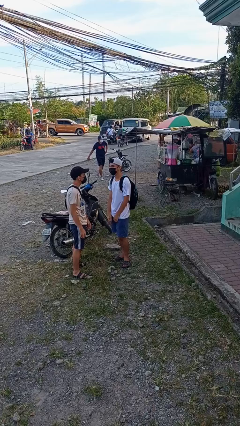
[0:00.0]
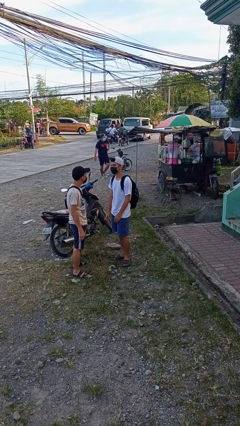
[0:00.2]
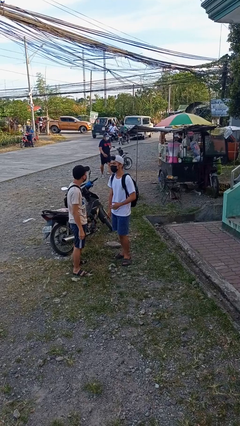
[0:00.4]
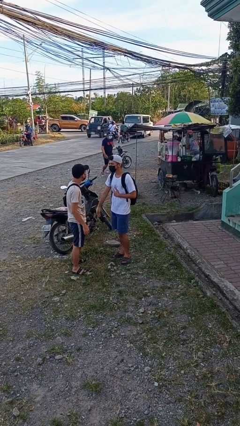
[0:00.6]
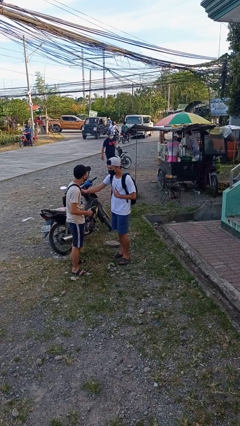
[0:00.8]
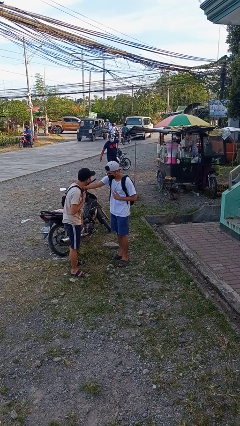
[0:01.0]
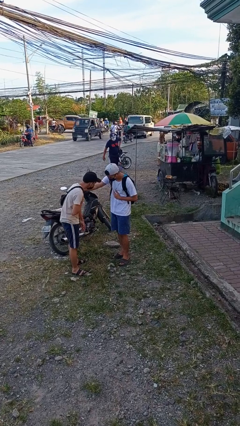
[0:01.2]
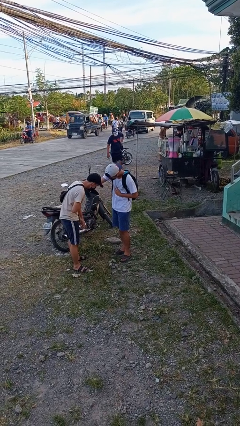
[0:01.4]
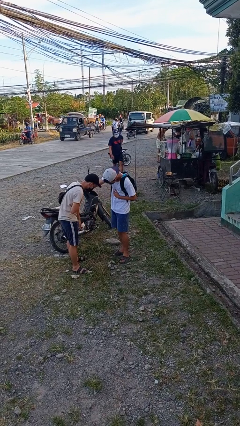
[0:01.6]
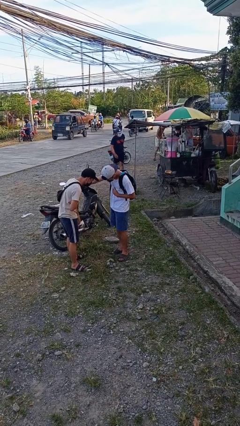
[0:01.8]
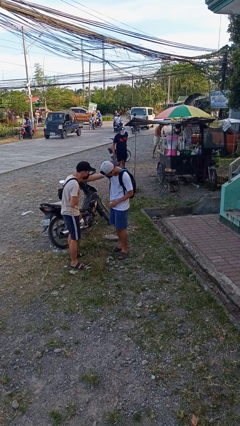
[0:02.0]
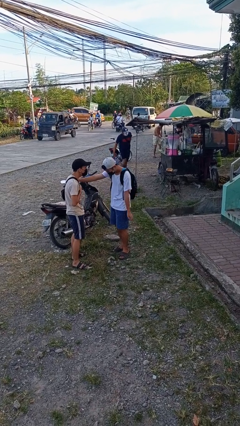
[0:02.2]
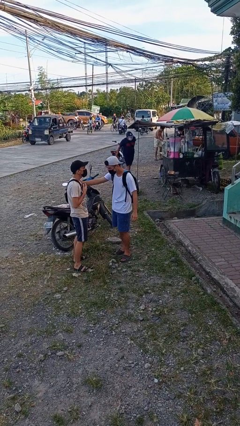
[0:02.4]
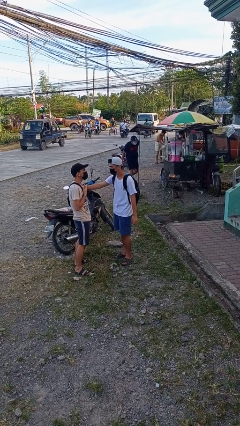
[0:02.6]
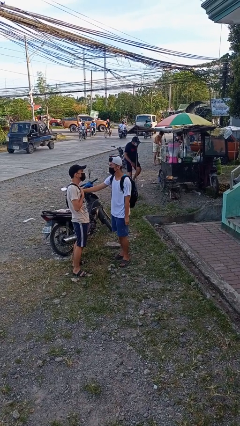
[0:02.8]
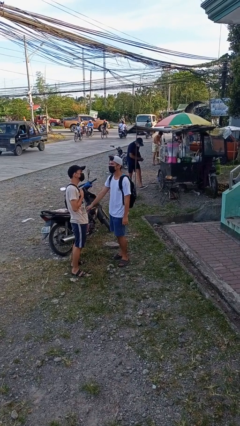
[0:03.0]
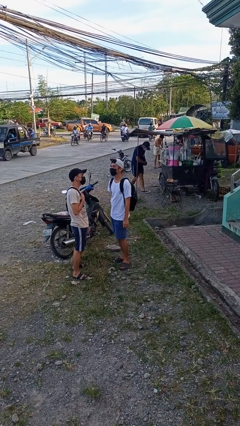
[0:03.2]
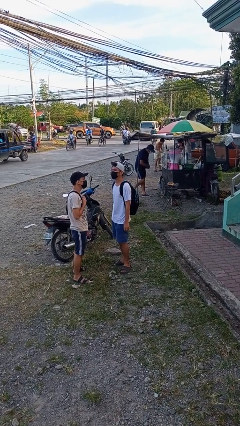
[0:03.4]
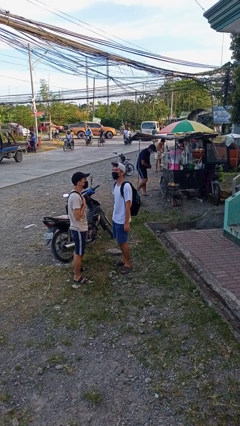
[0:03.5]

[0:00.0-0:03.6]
person laughs with person

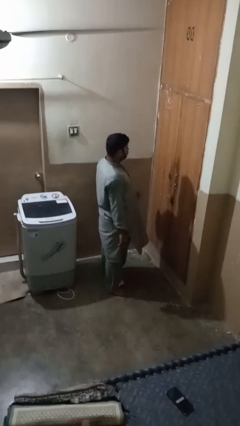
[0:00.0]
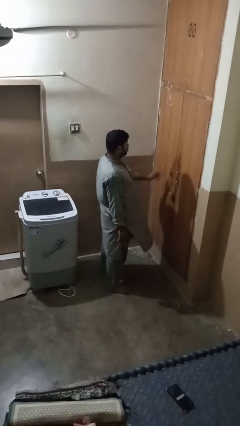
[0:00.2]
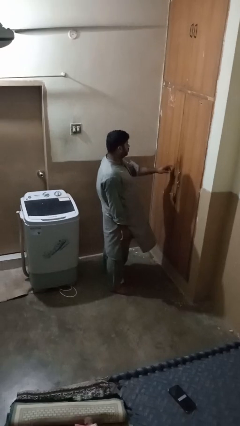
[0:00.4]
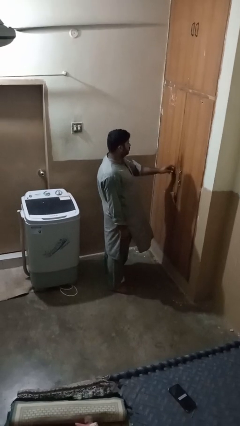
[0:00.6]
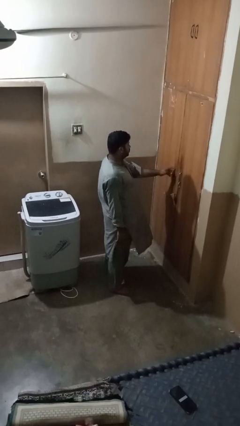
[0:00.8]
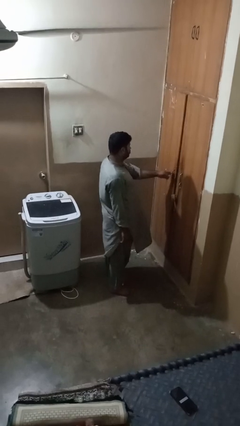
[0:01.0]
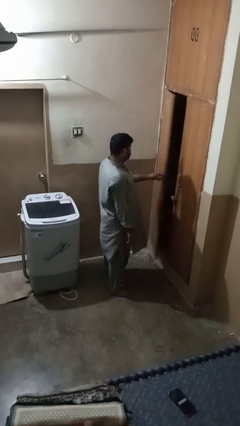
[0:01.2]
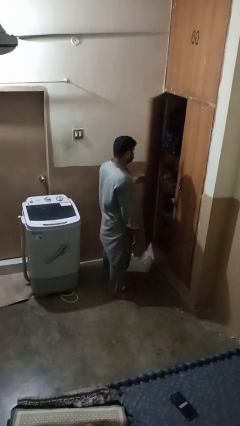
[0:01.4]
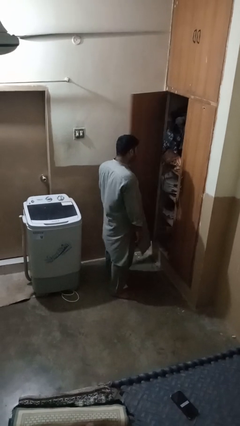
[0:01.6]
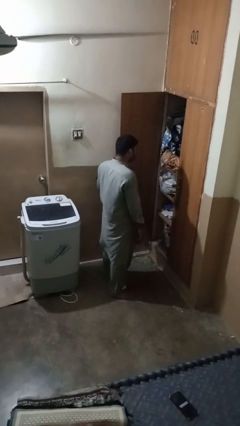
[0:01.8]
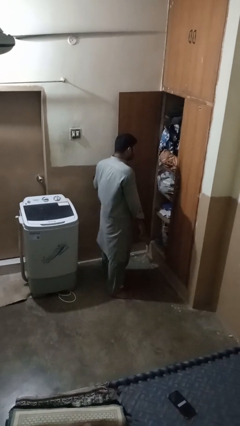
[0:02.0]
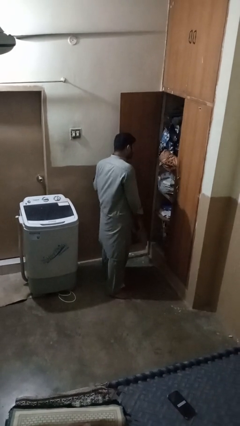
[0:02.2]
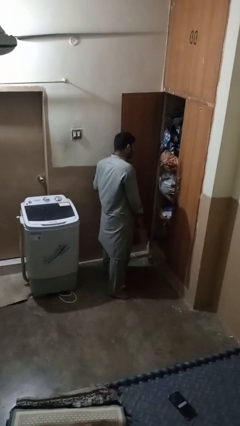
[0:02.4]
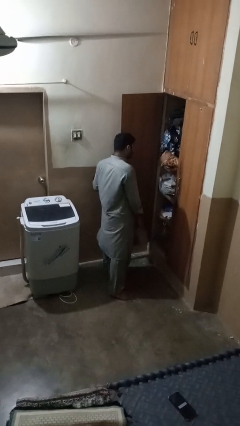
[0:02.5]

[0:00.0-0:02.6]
person opens closet door

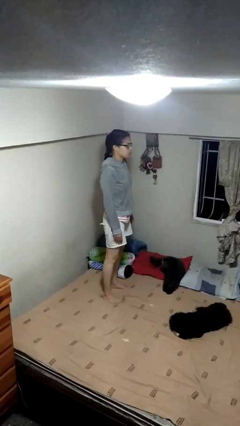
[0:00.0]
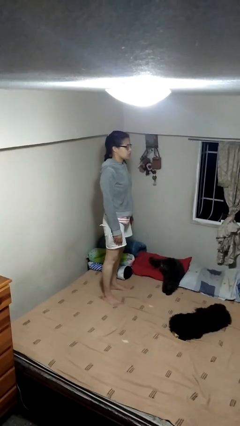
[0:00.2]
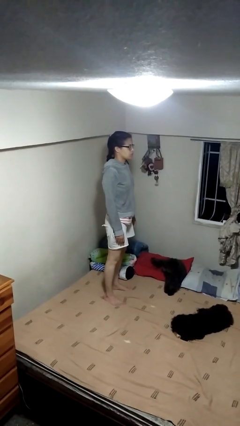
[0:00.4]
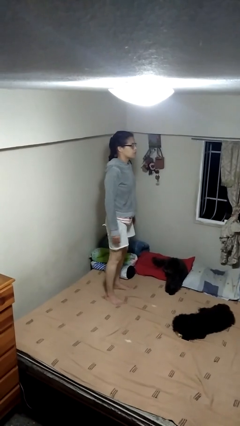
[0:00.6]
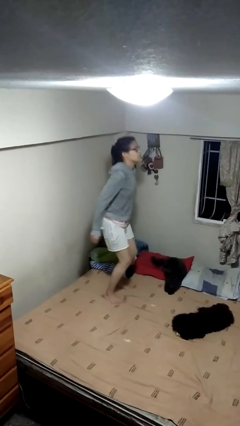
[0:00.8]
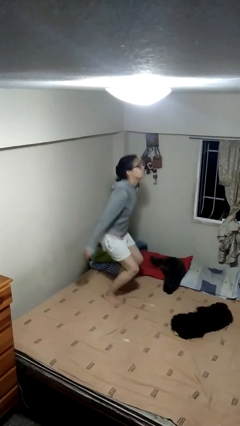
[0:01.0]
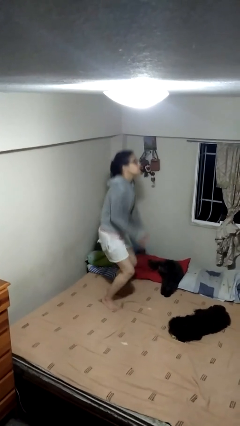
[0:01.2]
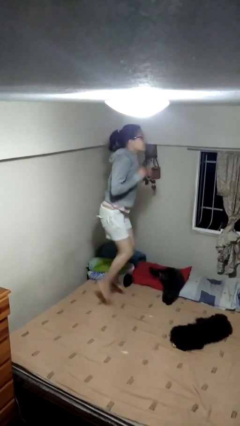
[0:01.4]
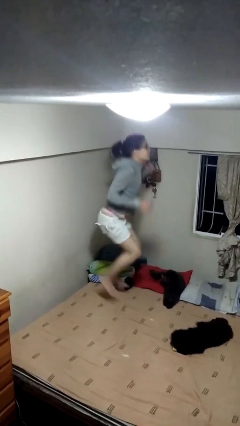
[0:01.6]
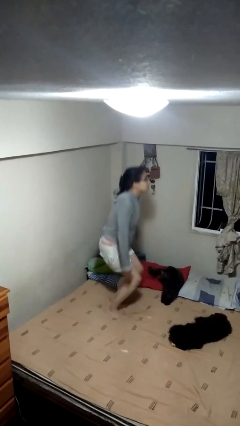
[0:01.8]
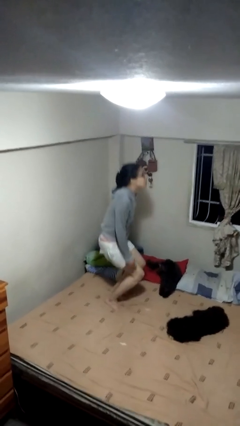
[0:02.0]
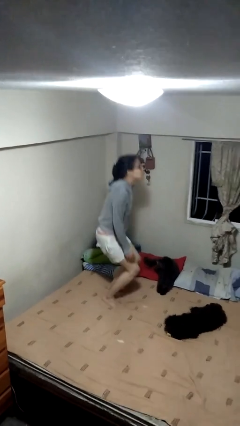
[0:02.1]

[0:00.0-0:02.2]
person jumps on bed

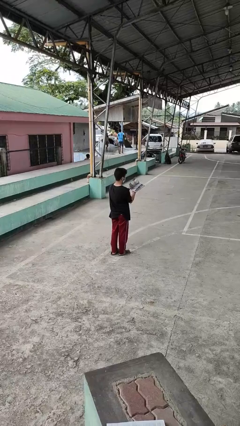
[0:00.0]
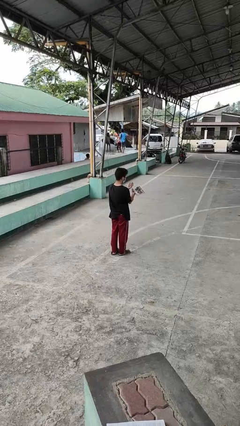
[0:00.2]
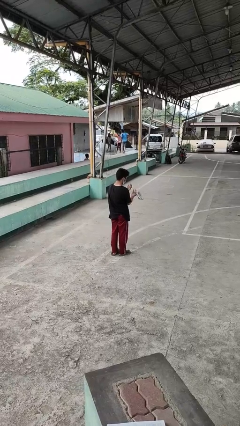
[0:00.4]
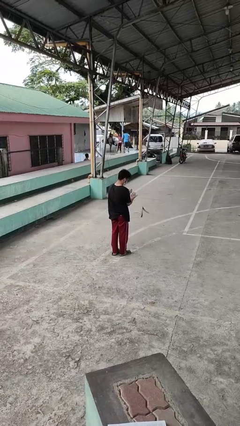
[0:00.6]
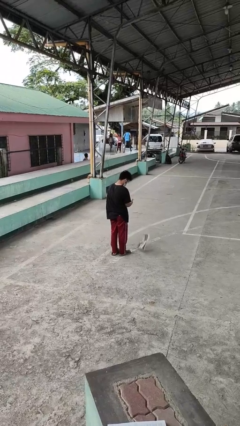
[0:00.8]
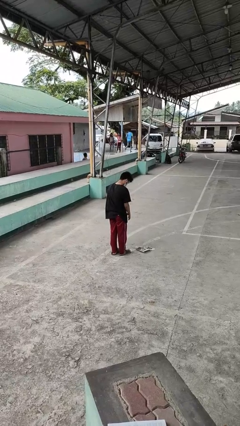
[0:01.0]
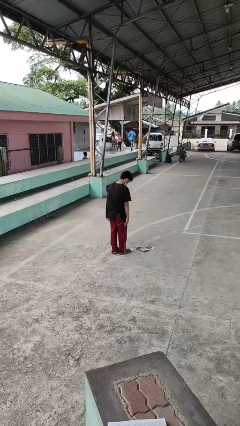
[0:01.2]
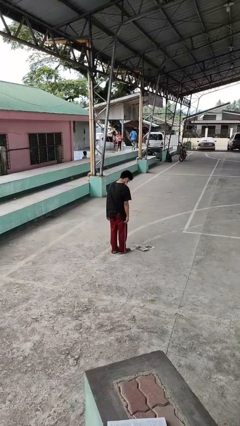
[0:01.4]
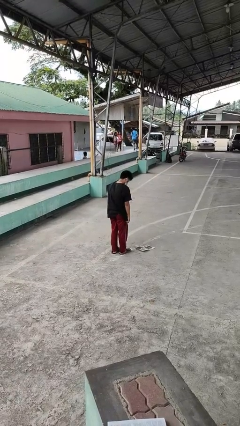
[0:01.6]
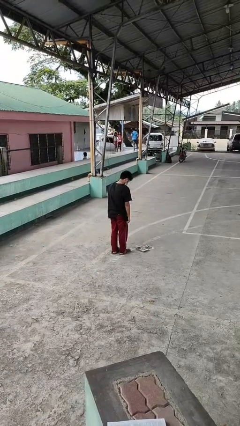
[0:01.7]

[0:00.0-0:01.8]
person drops object

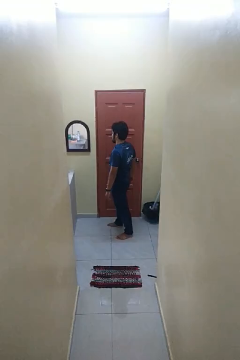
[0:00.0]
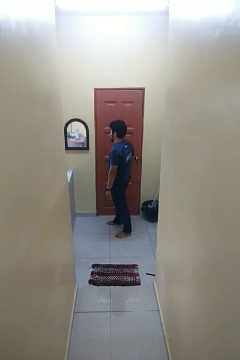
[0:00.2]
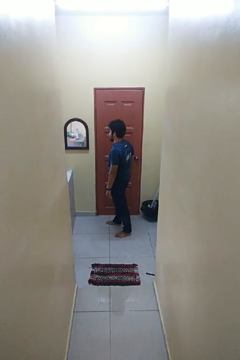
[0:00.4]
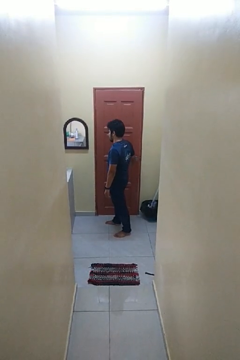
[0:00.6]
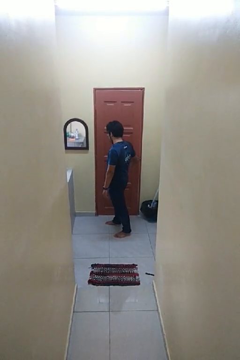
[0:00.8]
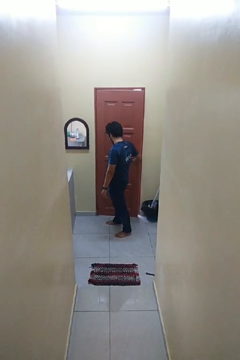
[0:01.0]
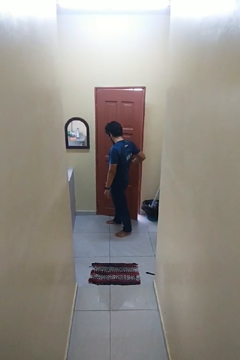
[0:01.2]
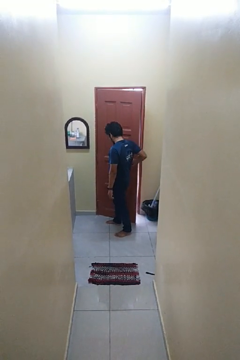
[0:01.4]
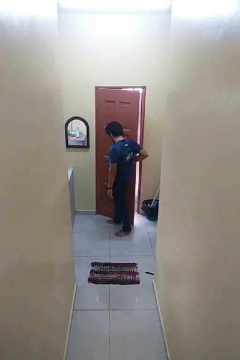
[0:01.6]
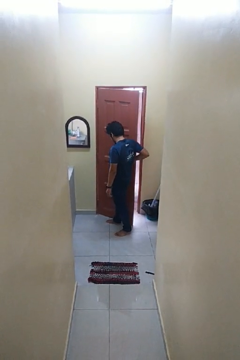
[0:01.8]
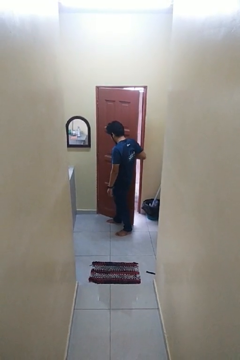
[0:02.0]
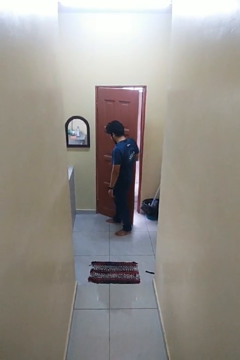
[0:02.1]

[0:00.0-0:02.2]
person opens facility door

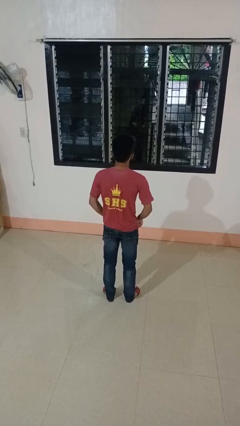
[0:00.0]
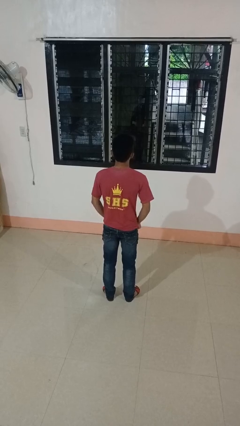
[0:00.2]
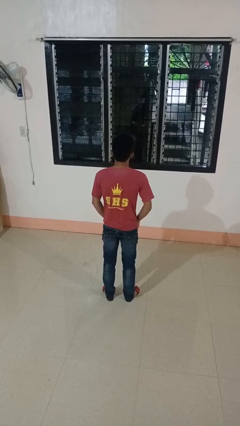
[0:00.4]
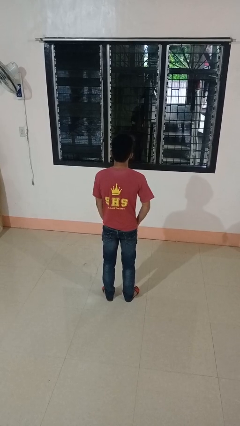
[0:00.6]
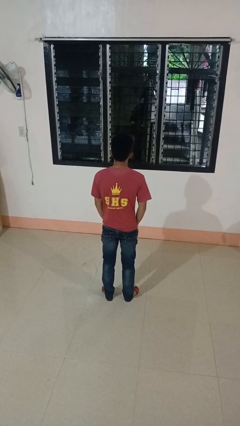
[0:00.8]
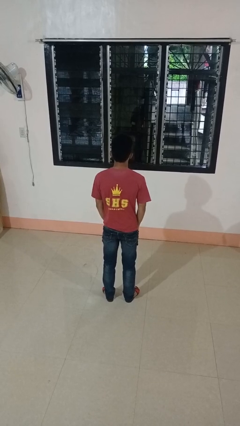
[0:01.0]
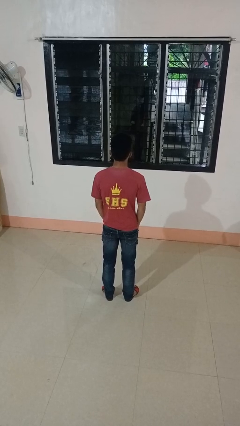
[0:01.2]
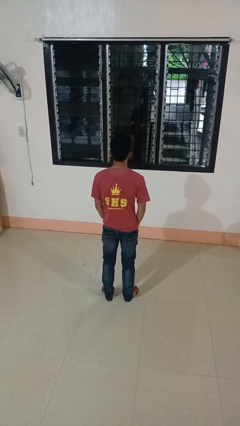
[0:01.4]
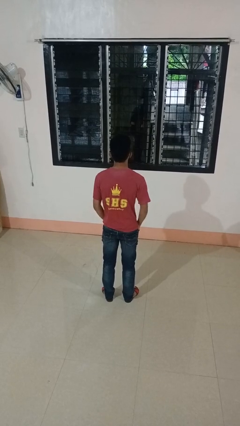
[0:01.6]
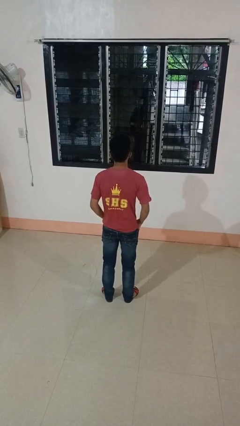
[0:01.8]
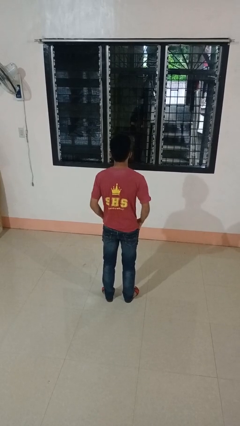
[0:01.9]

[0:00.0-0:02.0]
person puts hands in back pockets

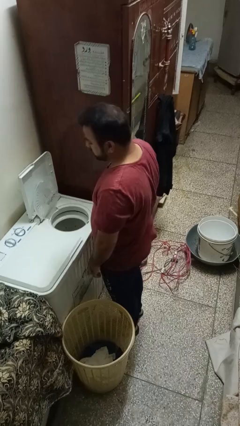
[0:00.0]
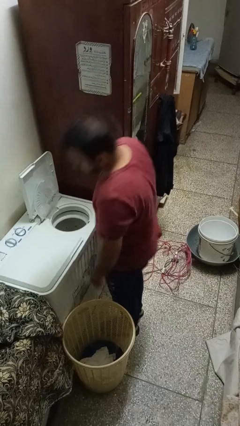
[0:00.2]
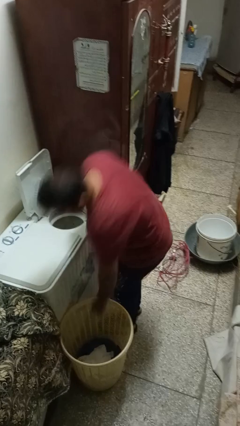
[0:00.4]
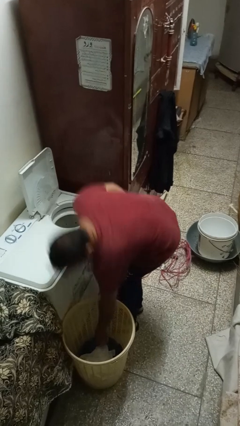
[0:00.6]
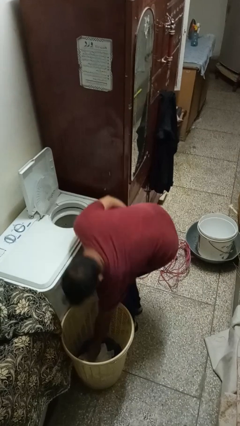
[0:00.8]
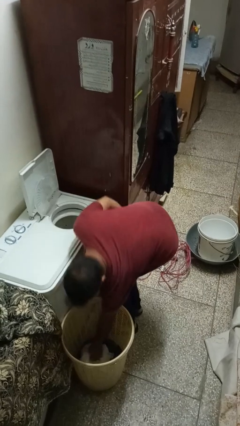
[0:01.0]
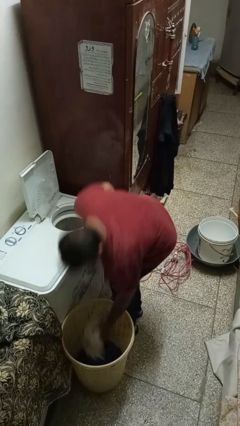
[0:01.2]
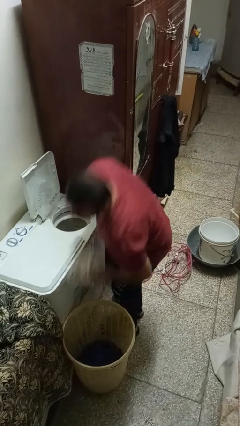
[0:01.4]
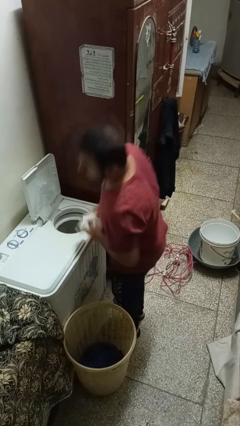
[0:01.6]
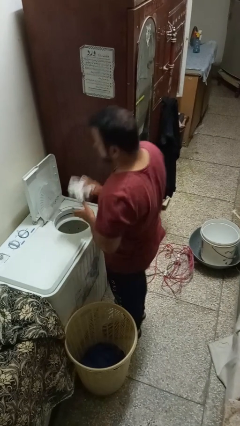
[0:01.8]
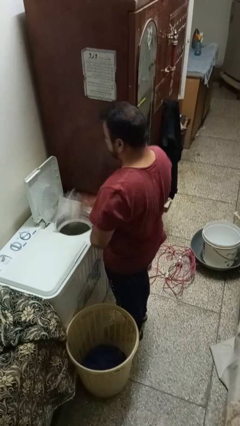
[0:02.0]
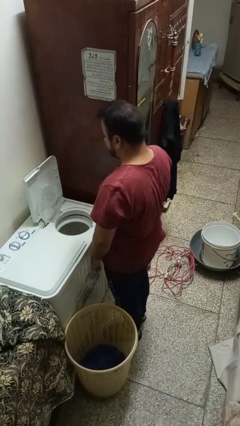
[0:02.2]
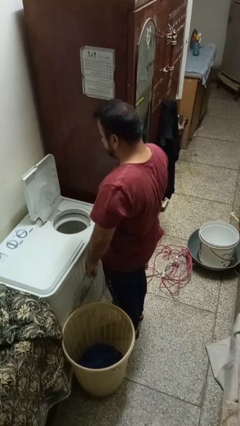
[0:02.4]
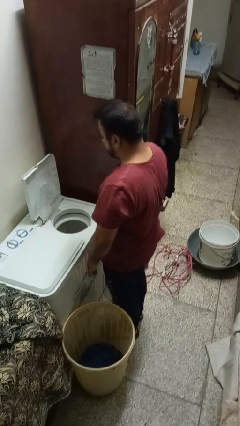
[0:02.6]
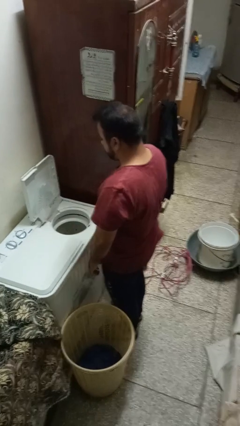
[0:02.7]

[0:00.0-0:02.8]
person loads dryer

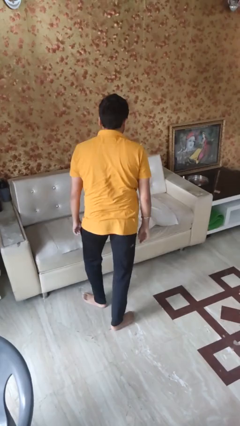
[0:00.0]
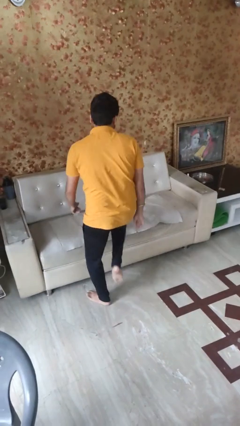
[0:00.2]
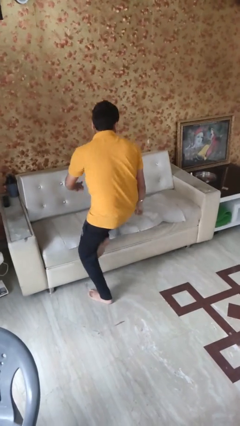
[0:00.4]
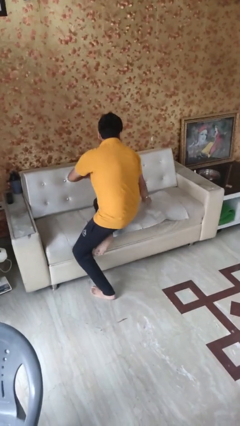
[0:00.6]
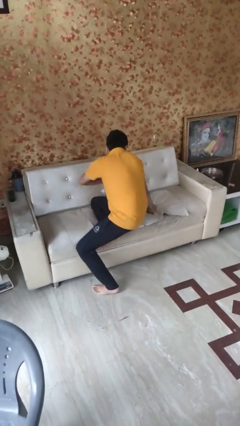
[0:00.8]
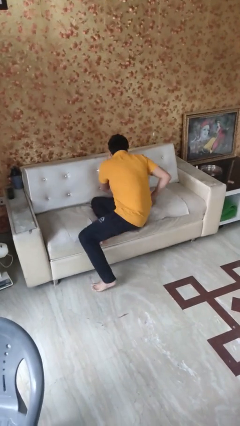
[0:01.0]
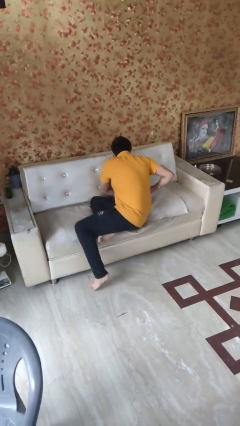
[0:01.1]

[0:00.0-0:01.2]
person lies down on bed
